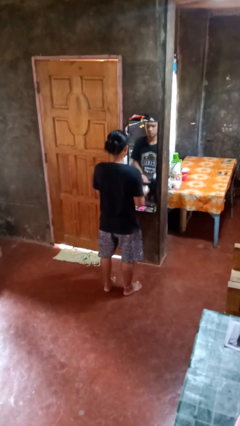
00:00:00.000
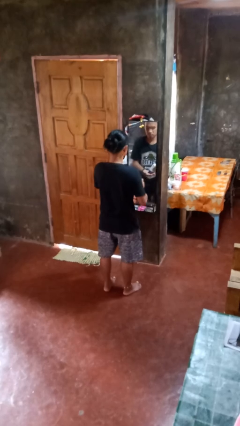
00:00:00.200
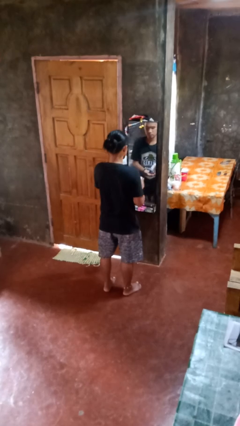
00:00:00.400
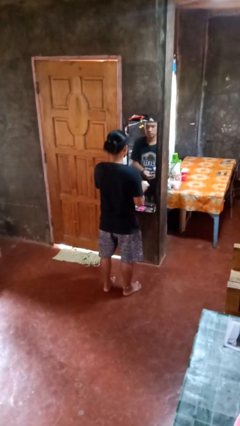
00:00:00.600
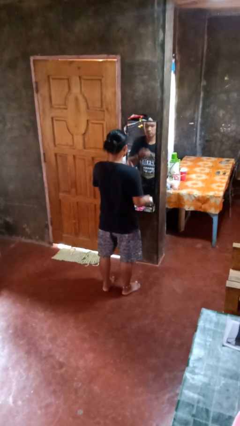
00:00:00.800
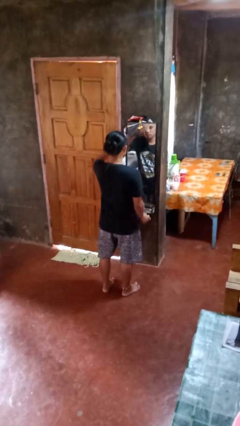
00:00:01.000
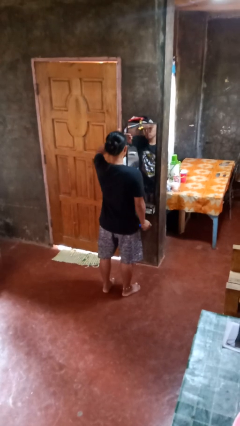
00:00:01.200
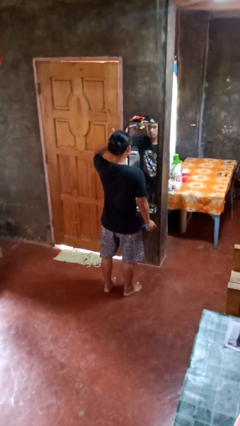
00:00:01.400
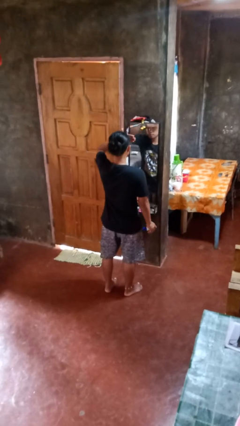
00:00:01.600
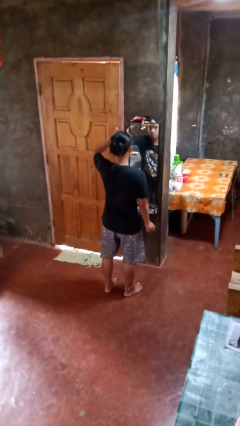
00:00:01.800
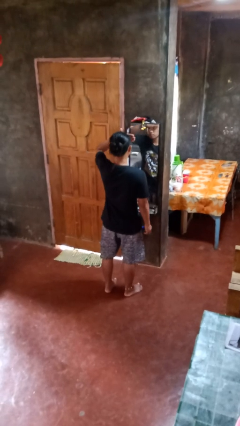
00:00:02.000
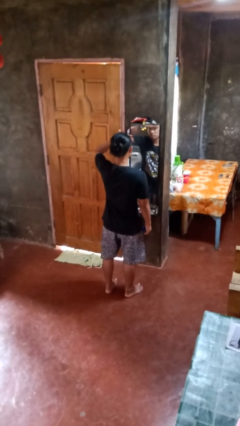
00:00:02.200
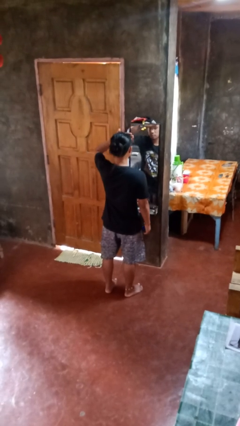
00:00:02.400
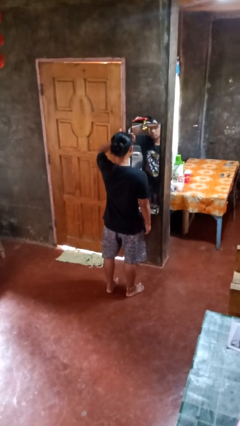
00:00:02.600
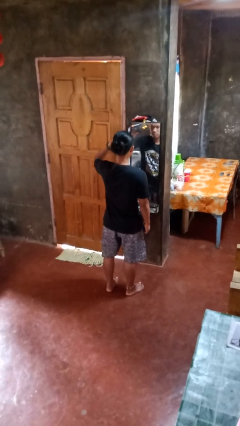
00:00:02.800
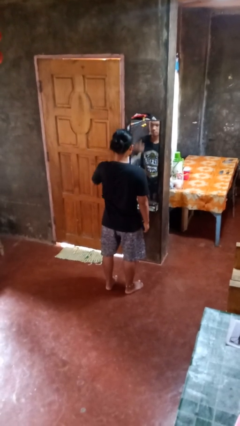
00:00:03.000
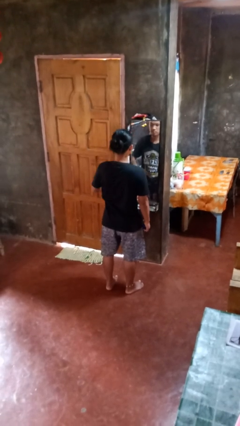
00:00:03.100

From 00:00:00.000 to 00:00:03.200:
person applies eye makeup

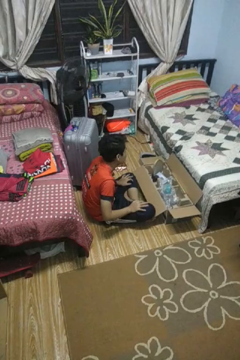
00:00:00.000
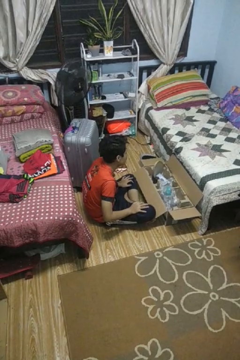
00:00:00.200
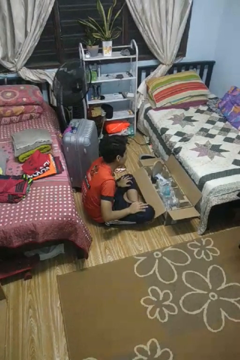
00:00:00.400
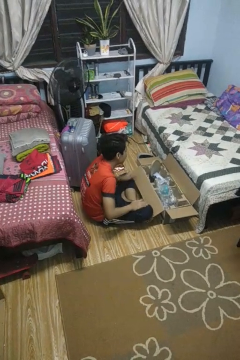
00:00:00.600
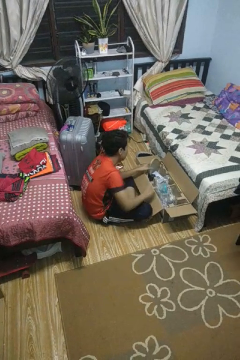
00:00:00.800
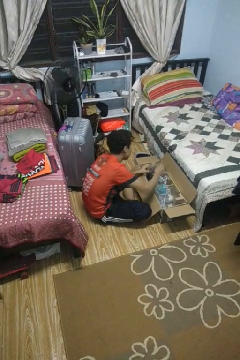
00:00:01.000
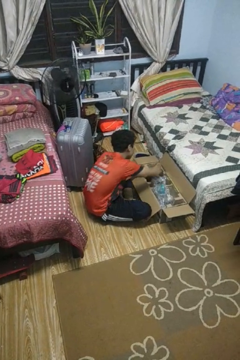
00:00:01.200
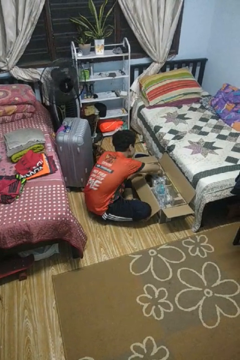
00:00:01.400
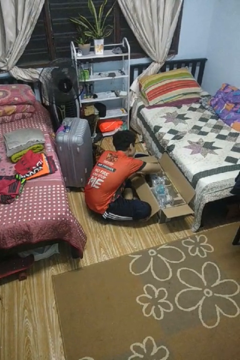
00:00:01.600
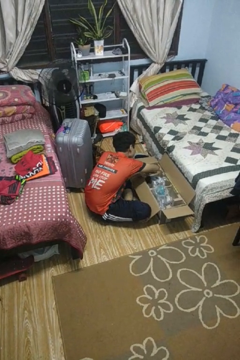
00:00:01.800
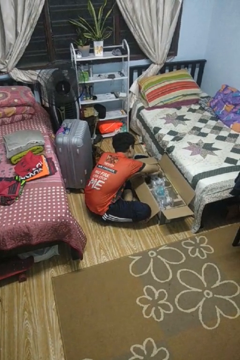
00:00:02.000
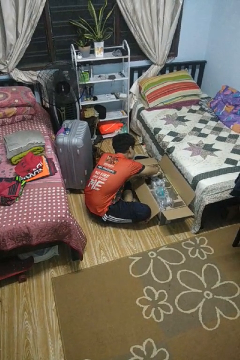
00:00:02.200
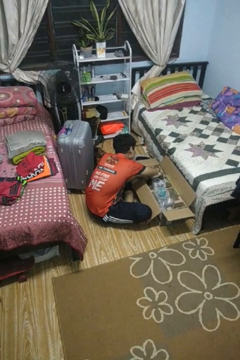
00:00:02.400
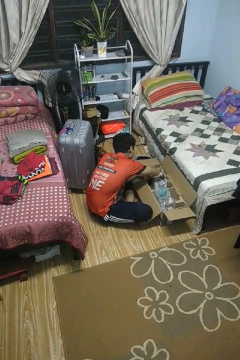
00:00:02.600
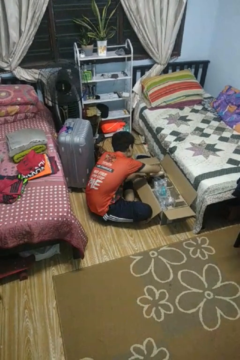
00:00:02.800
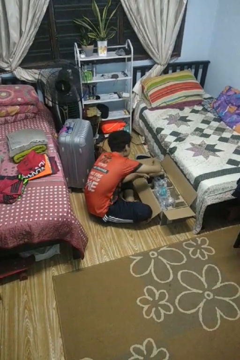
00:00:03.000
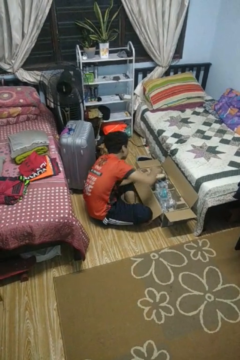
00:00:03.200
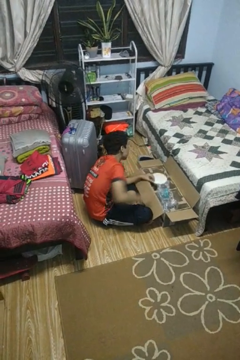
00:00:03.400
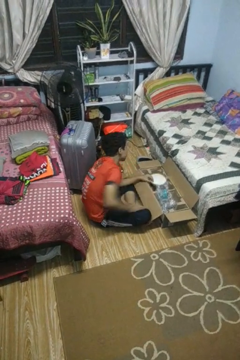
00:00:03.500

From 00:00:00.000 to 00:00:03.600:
person searches in box

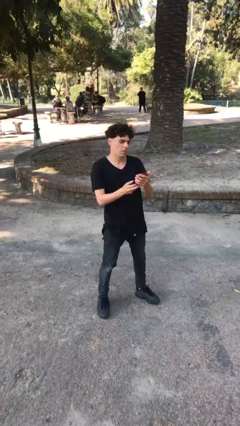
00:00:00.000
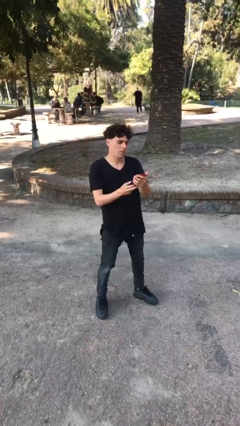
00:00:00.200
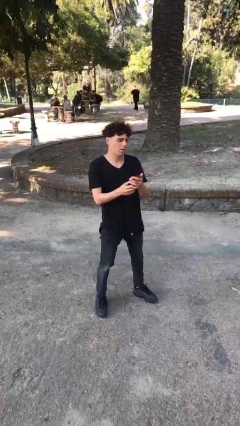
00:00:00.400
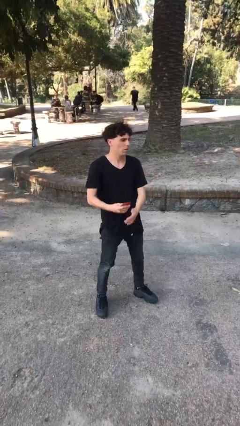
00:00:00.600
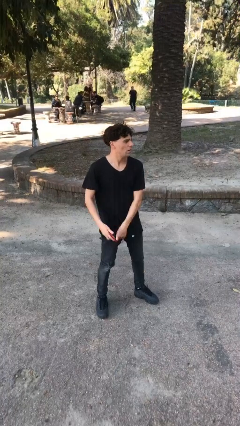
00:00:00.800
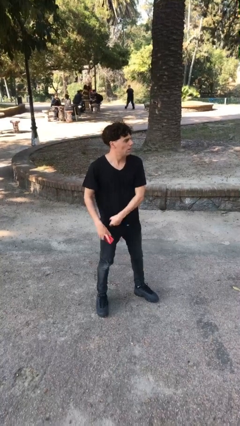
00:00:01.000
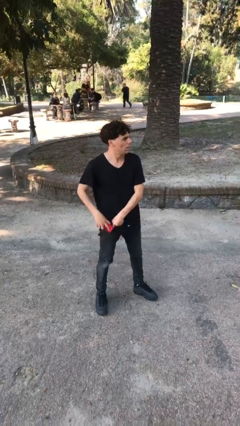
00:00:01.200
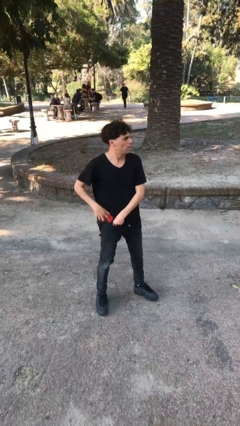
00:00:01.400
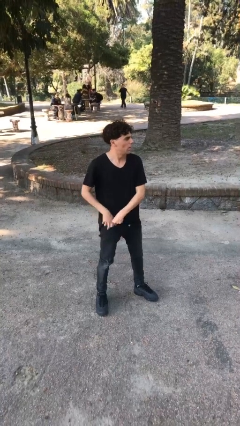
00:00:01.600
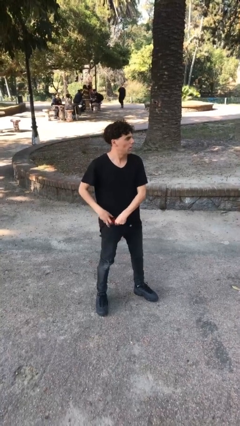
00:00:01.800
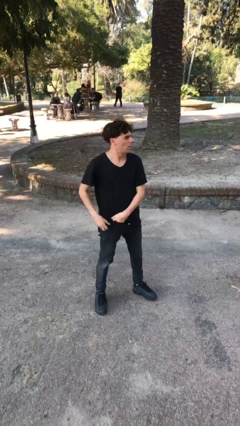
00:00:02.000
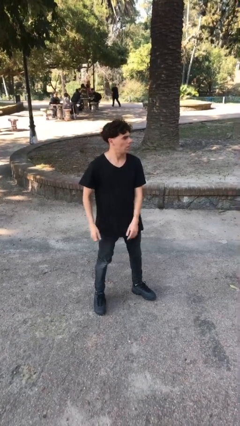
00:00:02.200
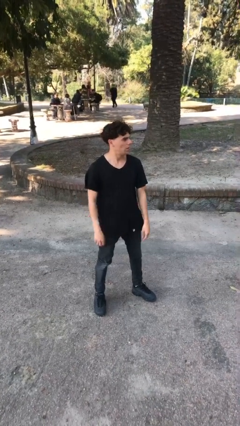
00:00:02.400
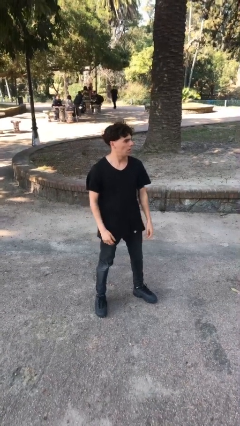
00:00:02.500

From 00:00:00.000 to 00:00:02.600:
person puts phone into pocket

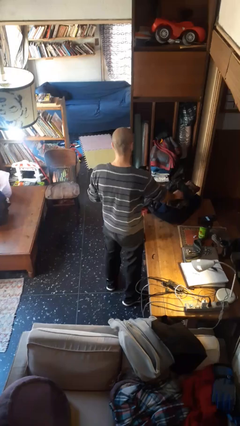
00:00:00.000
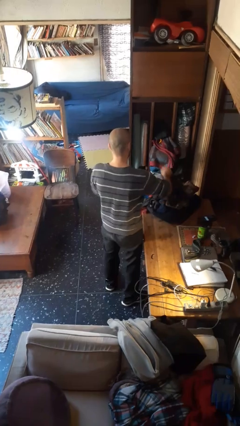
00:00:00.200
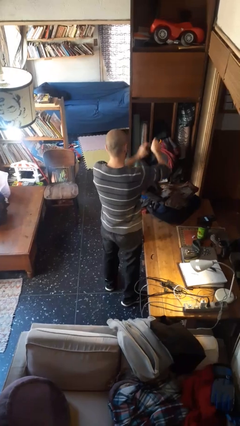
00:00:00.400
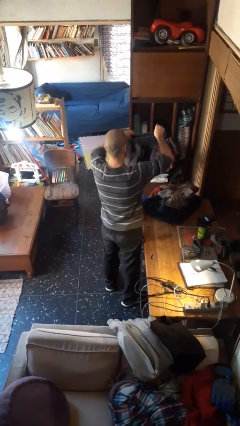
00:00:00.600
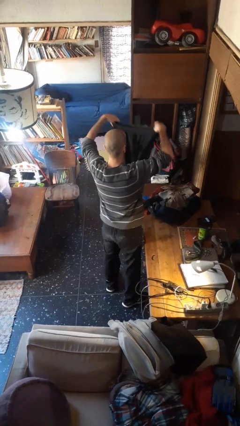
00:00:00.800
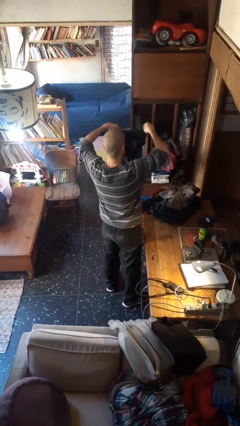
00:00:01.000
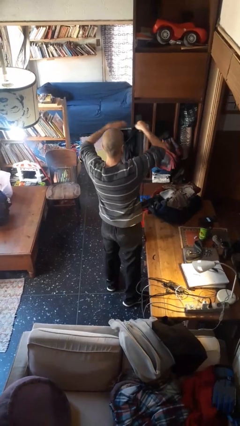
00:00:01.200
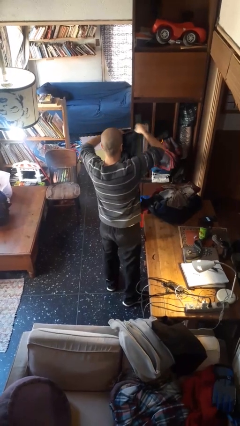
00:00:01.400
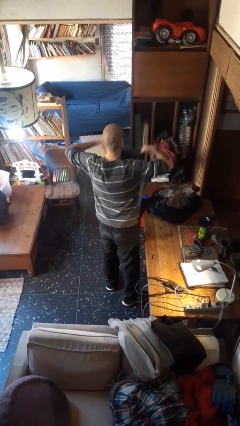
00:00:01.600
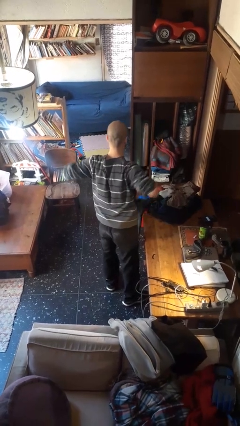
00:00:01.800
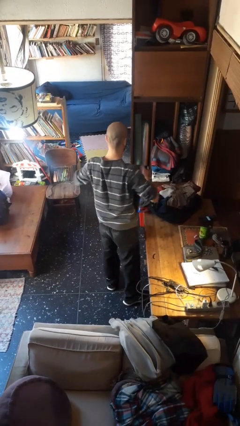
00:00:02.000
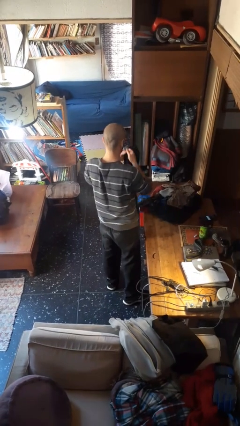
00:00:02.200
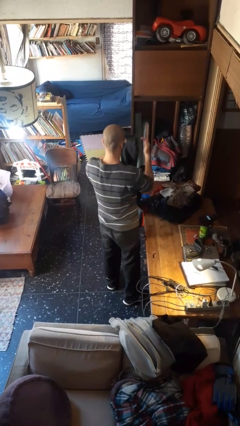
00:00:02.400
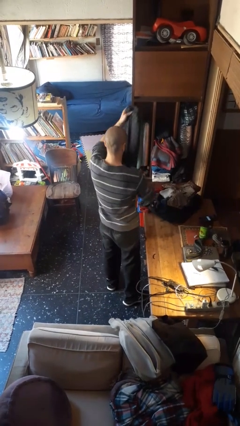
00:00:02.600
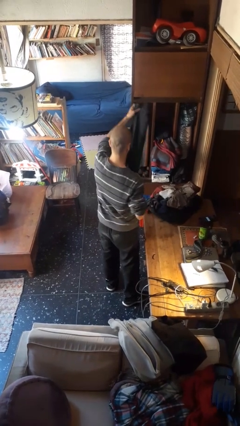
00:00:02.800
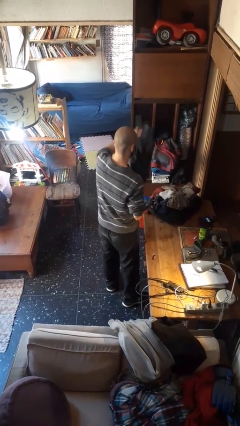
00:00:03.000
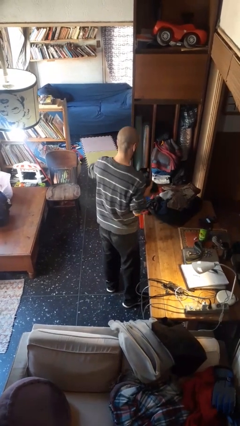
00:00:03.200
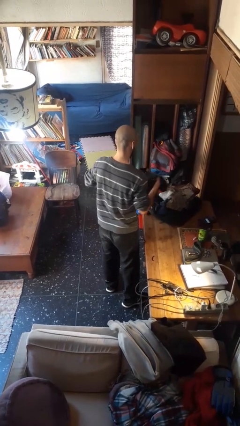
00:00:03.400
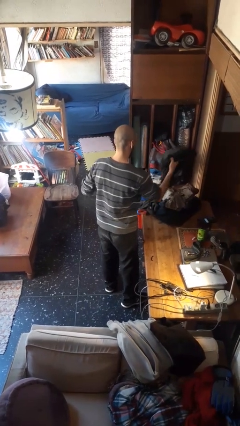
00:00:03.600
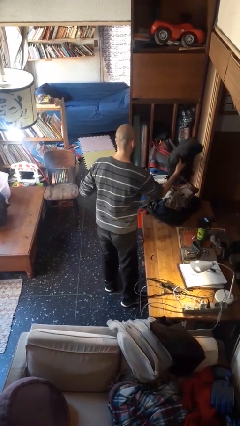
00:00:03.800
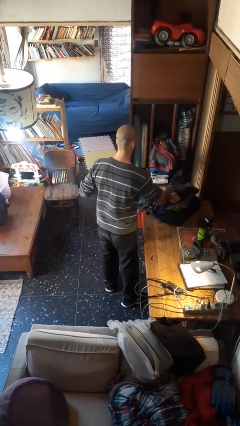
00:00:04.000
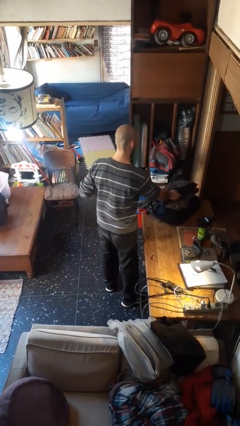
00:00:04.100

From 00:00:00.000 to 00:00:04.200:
person folds pants

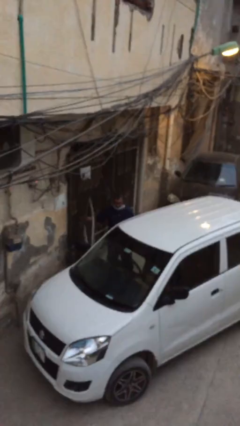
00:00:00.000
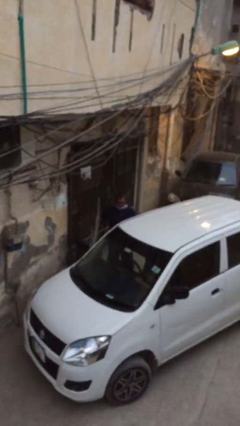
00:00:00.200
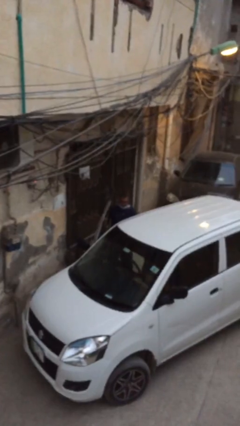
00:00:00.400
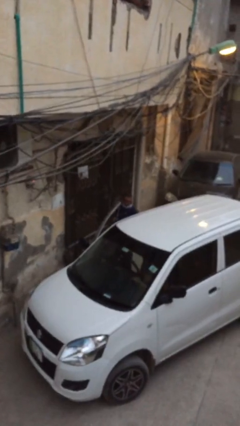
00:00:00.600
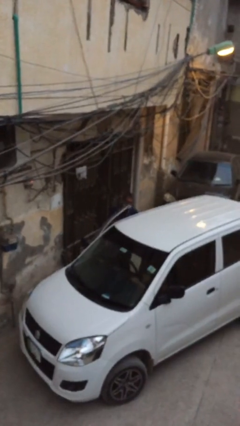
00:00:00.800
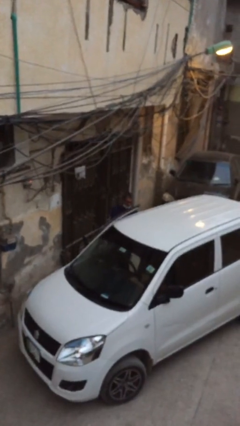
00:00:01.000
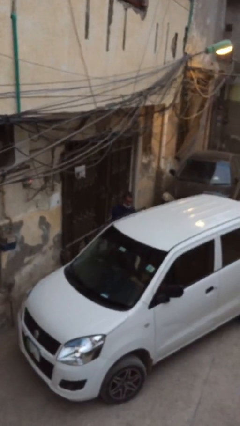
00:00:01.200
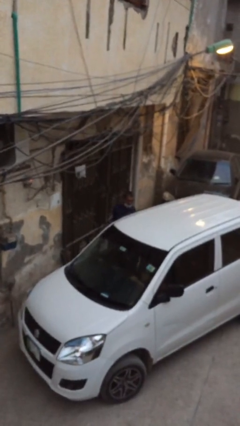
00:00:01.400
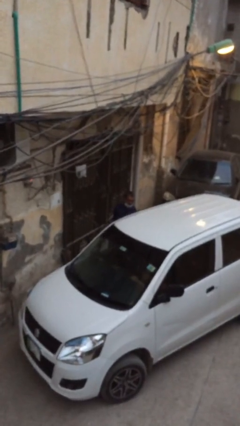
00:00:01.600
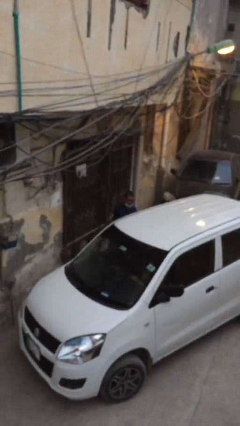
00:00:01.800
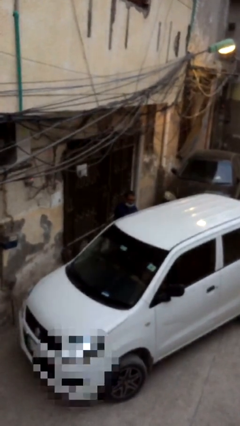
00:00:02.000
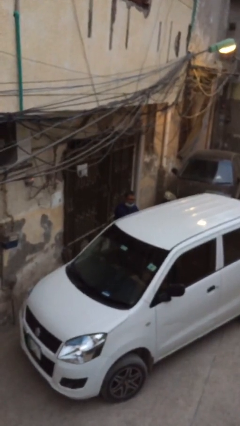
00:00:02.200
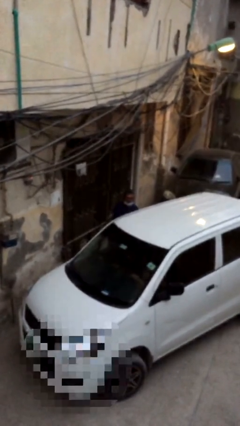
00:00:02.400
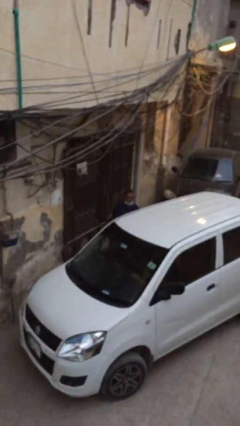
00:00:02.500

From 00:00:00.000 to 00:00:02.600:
person closes car door

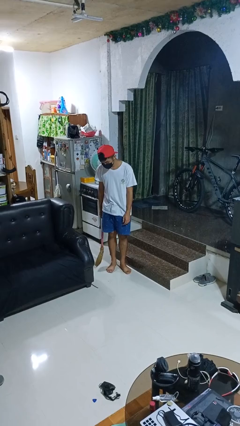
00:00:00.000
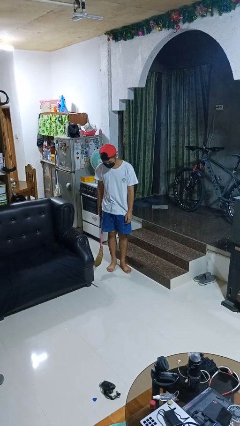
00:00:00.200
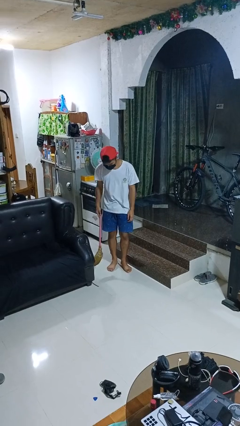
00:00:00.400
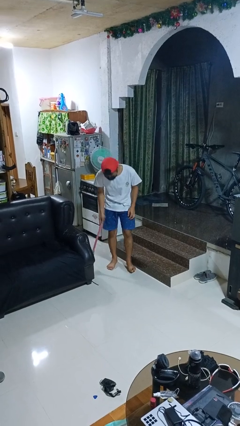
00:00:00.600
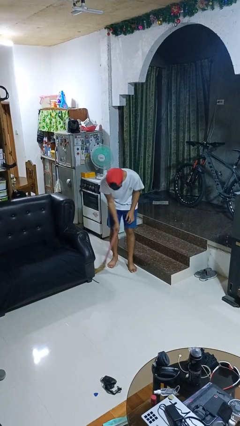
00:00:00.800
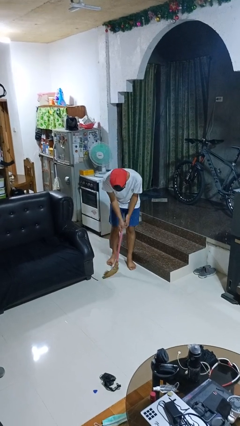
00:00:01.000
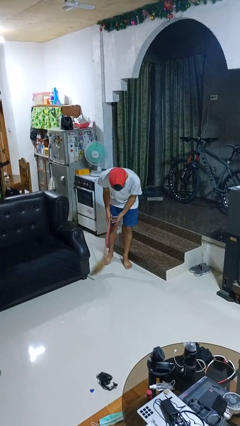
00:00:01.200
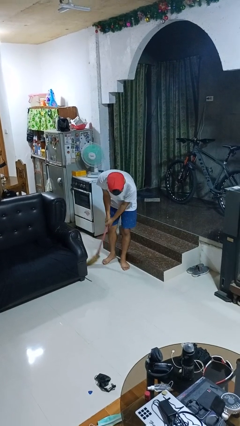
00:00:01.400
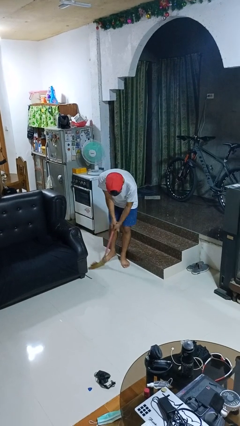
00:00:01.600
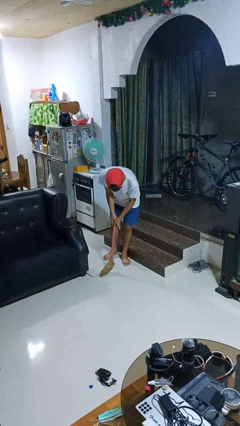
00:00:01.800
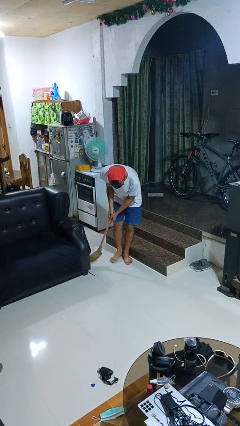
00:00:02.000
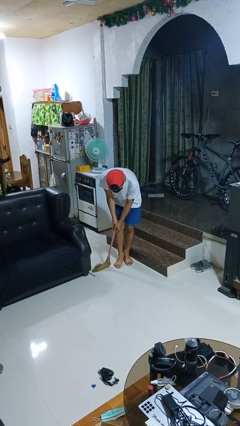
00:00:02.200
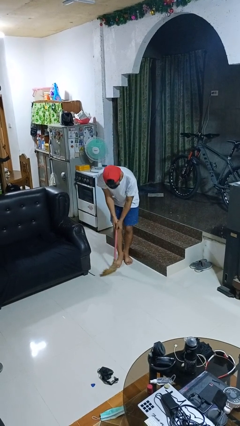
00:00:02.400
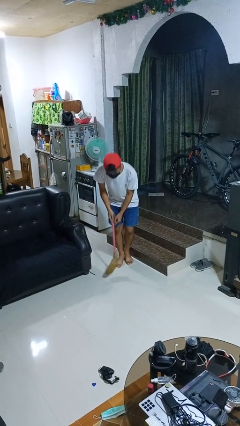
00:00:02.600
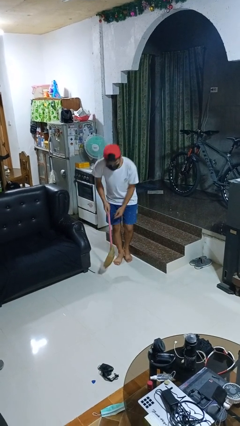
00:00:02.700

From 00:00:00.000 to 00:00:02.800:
person sweeps floor
